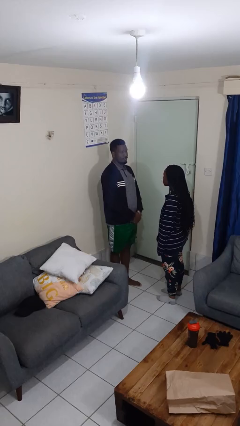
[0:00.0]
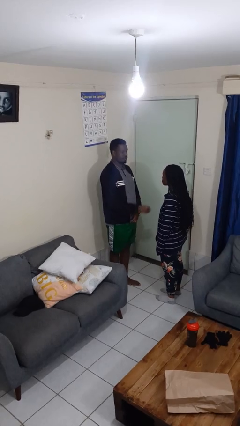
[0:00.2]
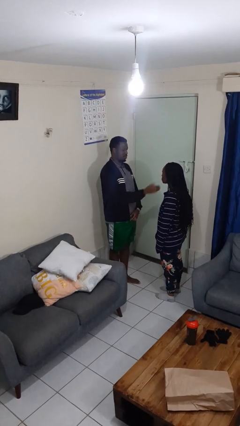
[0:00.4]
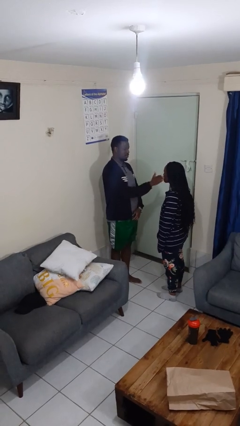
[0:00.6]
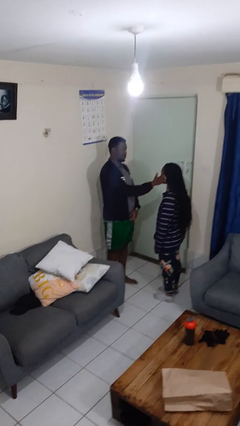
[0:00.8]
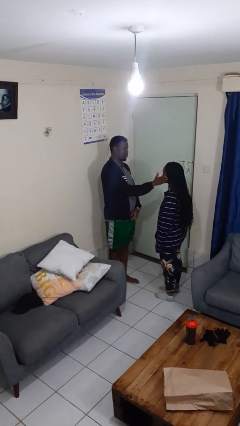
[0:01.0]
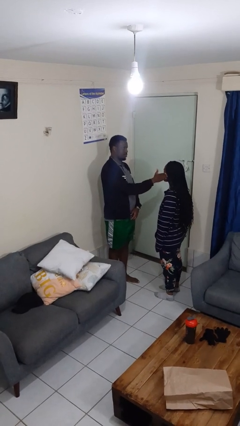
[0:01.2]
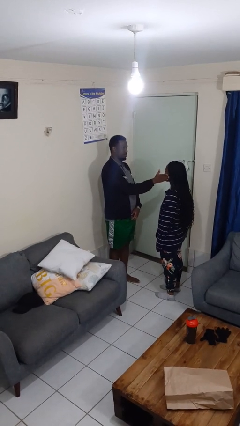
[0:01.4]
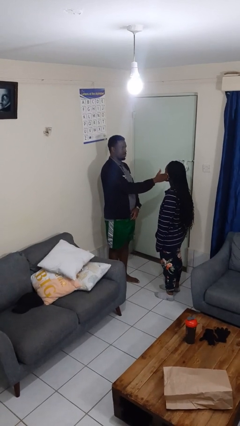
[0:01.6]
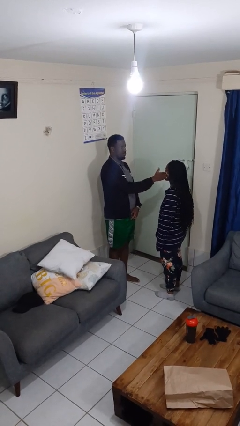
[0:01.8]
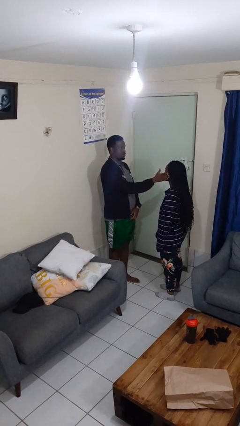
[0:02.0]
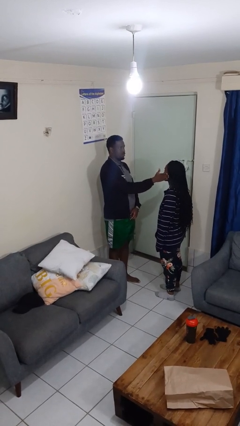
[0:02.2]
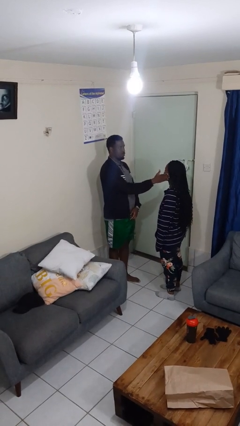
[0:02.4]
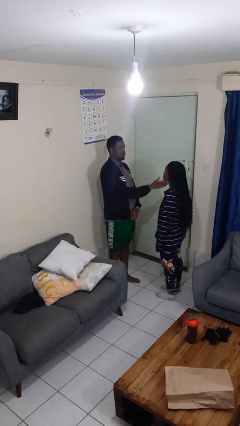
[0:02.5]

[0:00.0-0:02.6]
person touches face of person

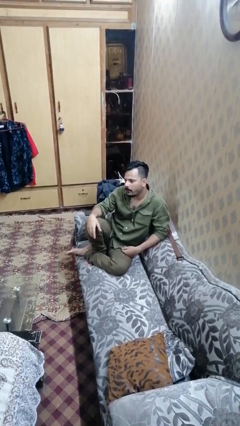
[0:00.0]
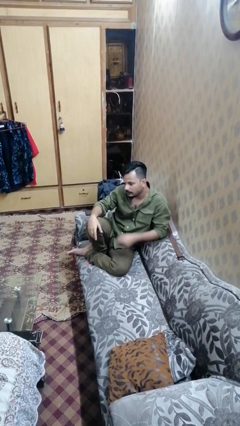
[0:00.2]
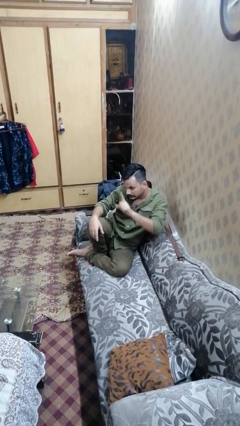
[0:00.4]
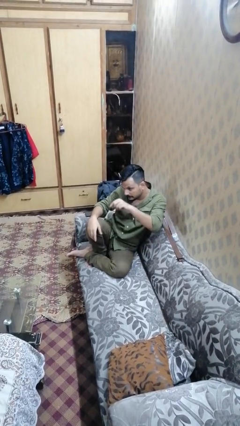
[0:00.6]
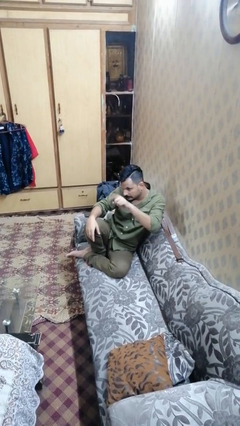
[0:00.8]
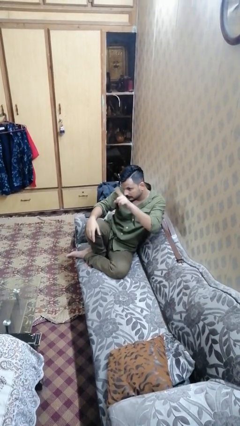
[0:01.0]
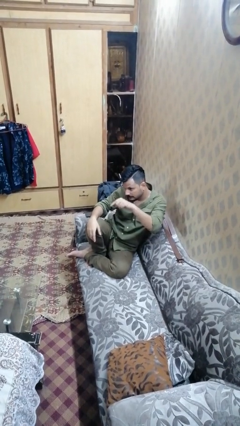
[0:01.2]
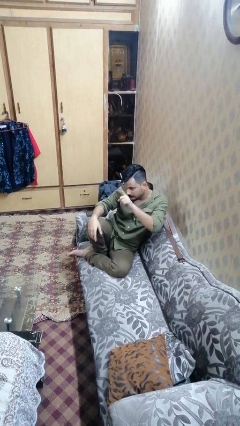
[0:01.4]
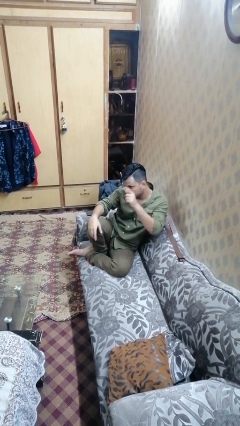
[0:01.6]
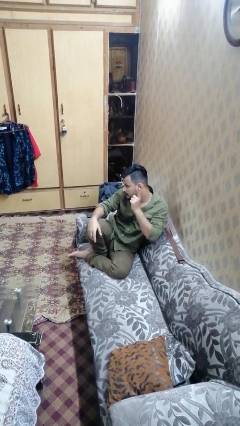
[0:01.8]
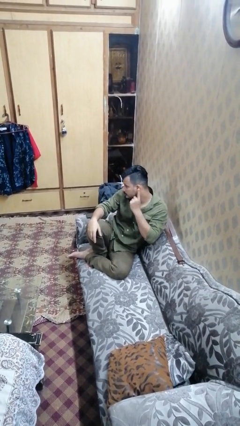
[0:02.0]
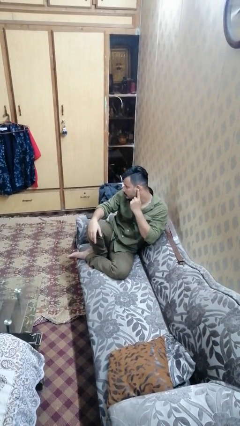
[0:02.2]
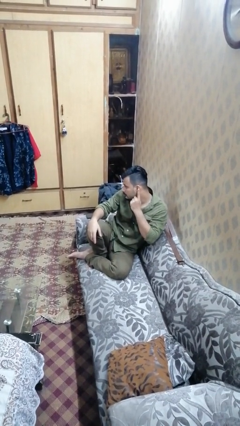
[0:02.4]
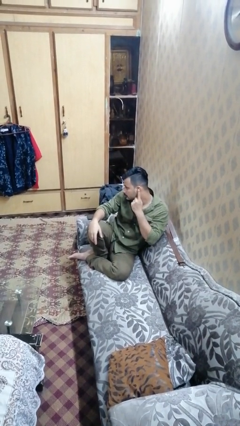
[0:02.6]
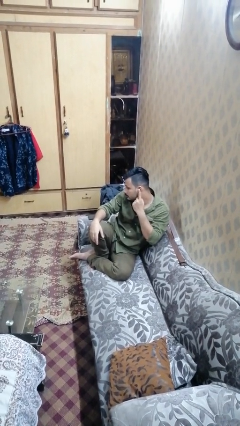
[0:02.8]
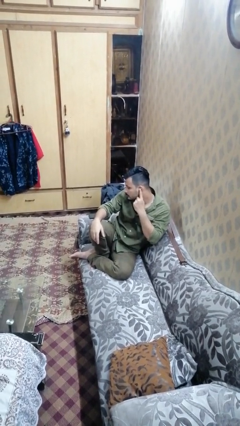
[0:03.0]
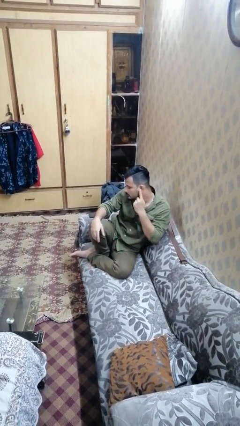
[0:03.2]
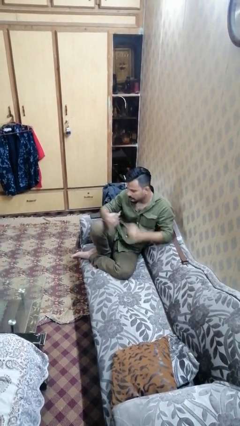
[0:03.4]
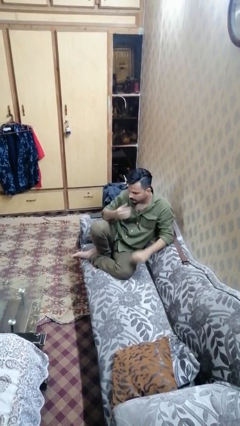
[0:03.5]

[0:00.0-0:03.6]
person gestures listen closely

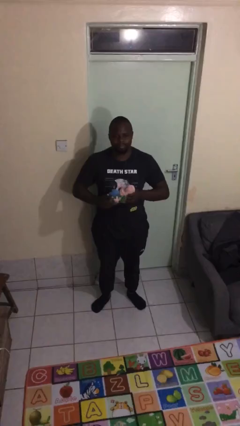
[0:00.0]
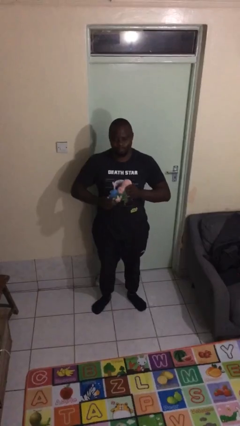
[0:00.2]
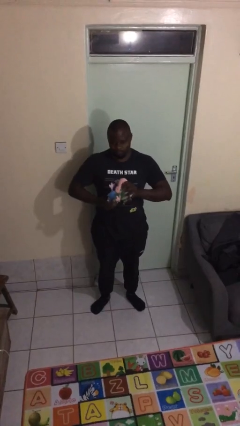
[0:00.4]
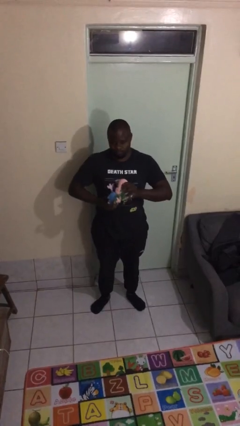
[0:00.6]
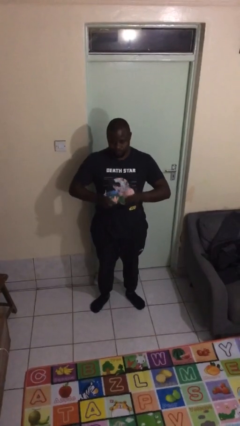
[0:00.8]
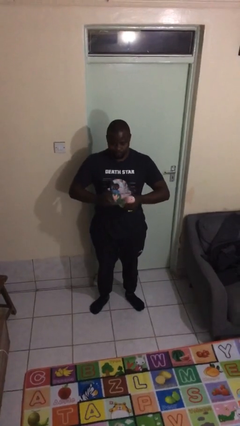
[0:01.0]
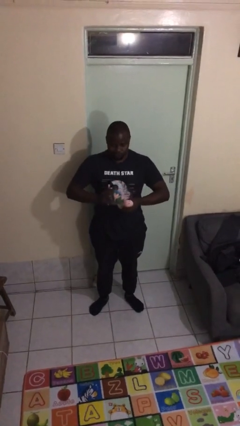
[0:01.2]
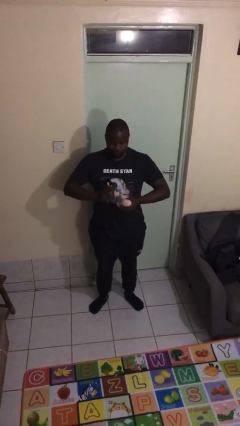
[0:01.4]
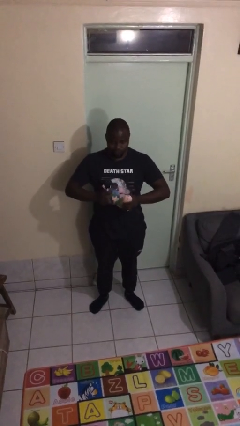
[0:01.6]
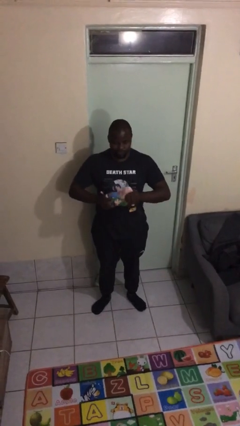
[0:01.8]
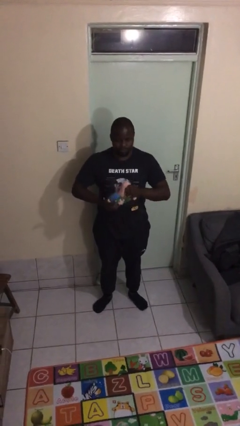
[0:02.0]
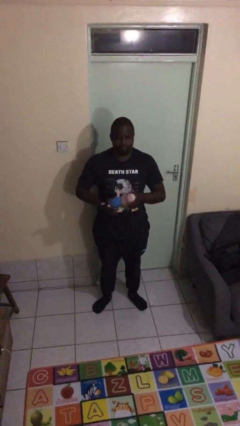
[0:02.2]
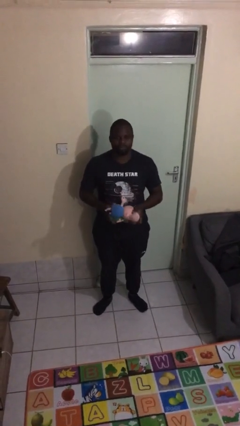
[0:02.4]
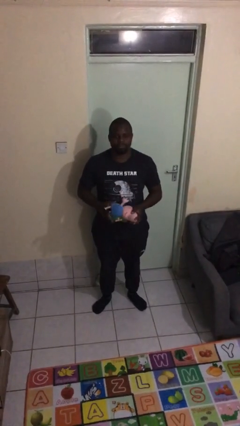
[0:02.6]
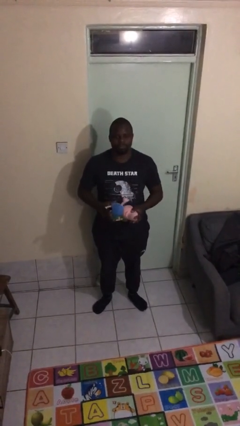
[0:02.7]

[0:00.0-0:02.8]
person squeezes object

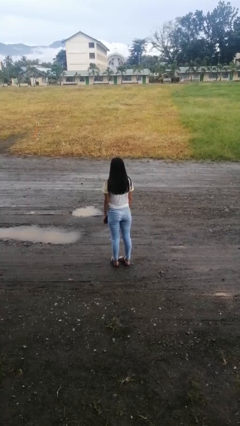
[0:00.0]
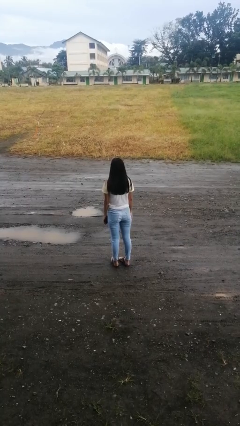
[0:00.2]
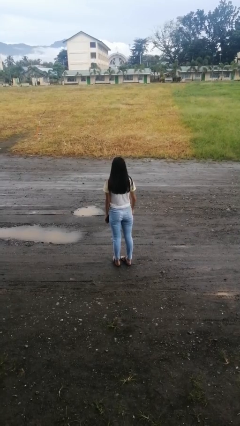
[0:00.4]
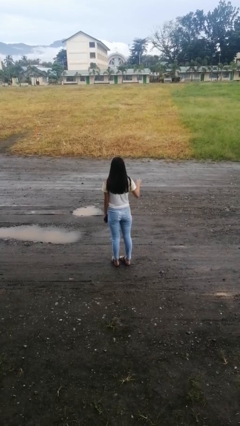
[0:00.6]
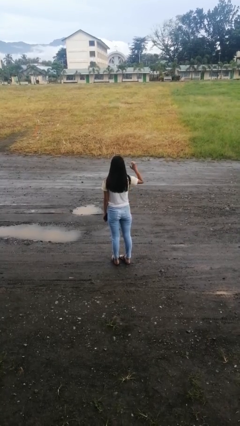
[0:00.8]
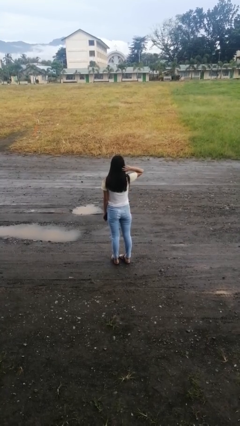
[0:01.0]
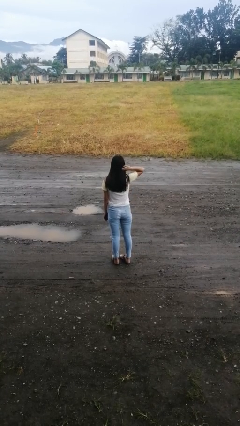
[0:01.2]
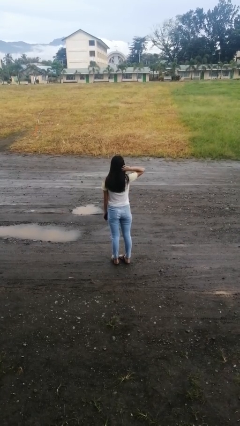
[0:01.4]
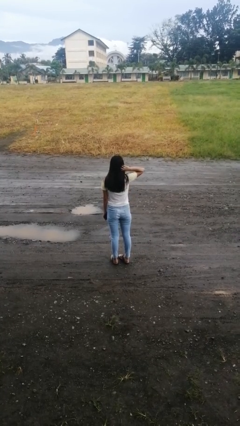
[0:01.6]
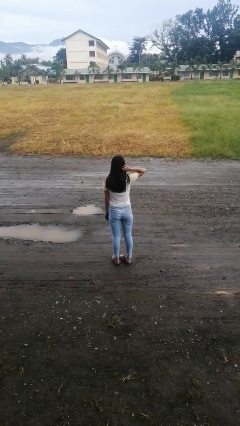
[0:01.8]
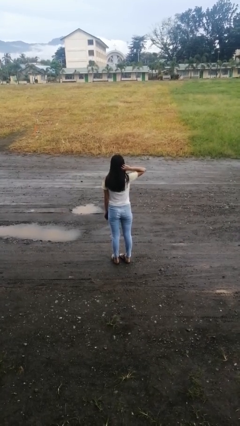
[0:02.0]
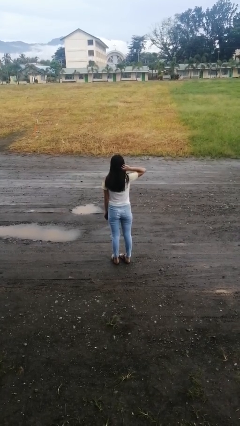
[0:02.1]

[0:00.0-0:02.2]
person scratches face

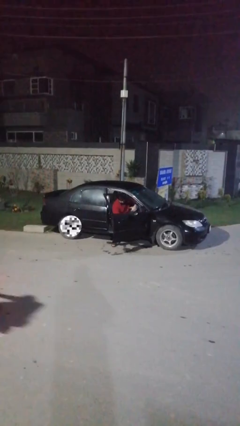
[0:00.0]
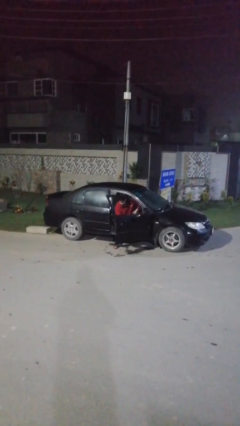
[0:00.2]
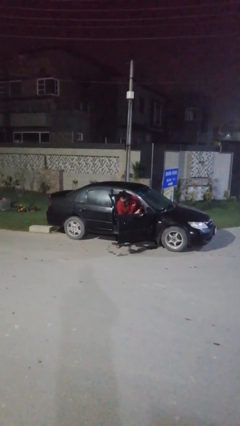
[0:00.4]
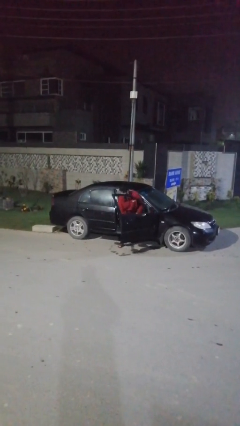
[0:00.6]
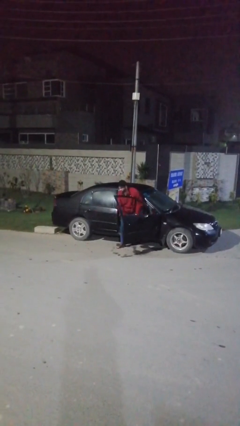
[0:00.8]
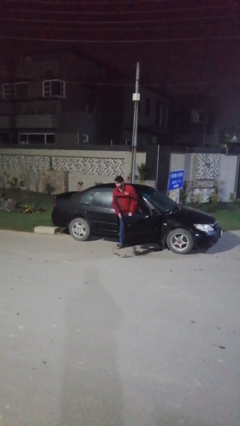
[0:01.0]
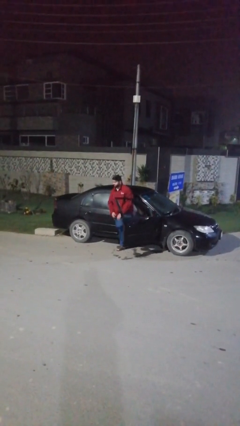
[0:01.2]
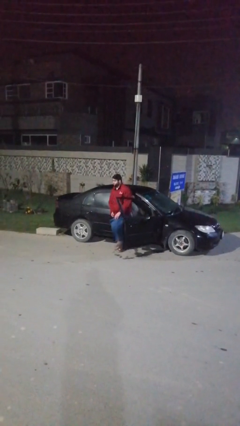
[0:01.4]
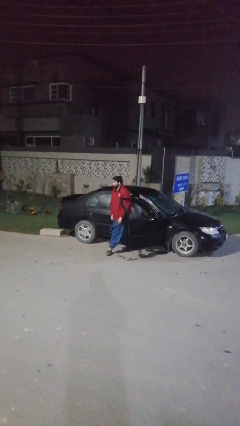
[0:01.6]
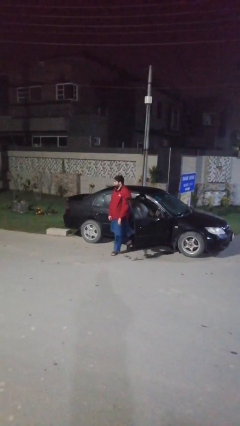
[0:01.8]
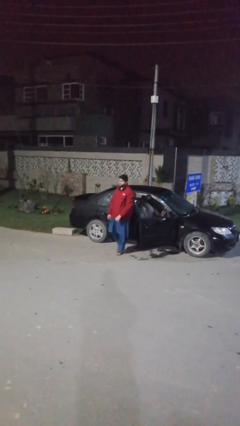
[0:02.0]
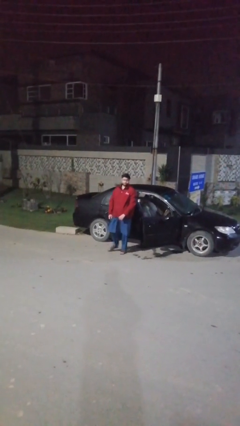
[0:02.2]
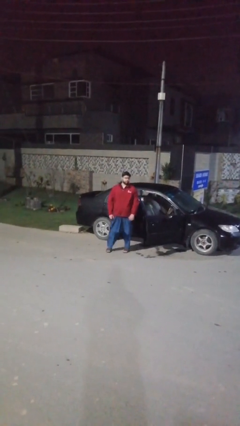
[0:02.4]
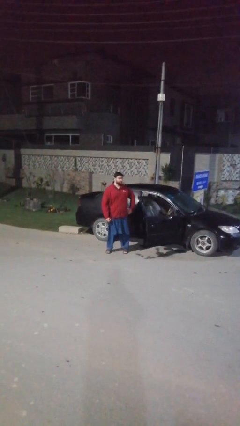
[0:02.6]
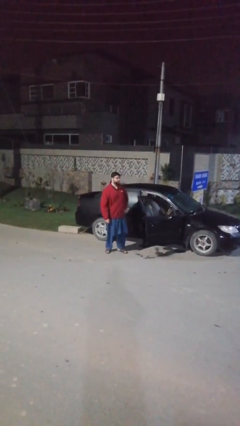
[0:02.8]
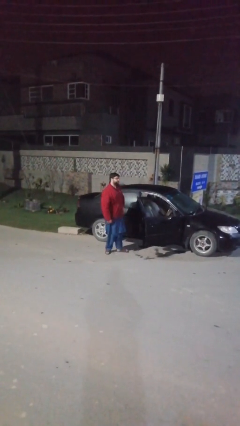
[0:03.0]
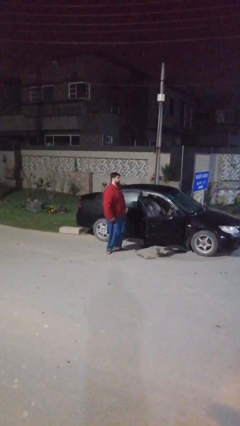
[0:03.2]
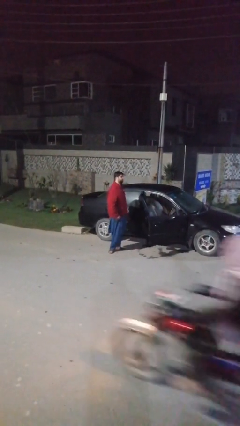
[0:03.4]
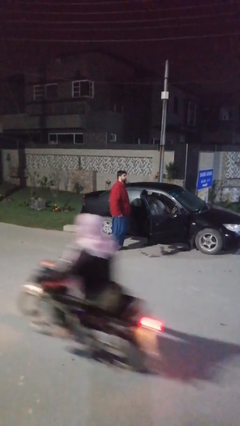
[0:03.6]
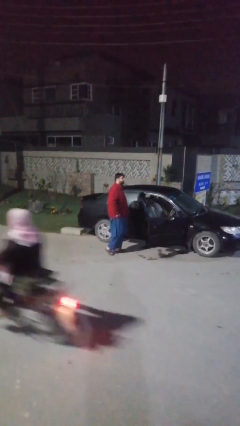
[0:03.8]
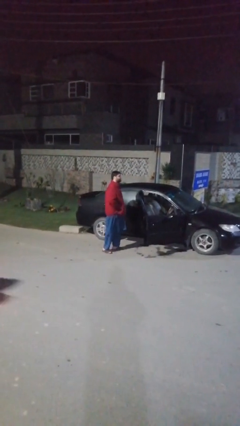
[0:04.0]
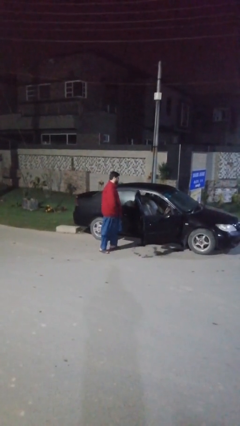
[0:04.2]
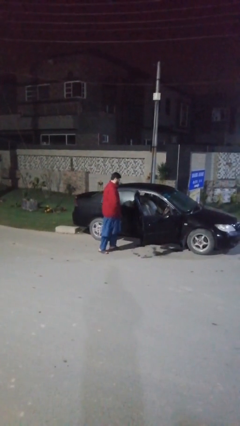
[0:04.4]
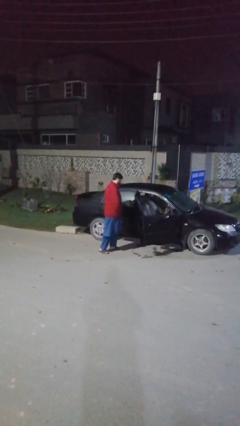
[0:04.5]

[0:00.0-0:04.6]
person exits car

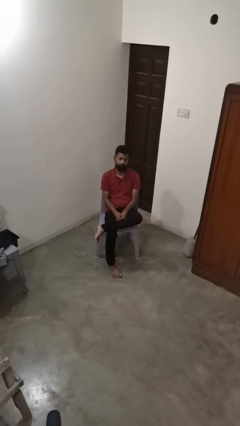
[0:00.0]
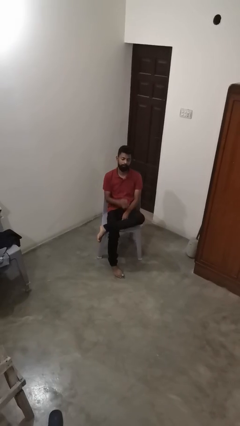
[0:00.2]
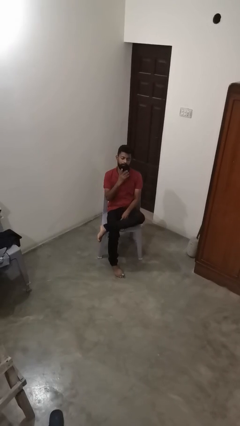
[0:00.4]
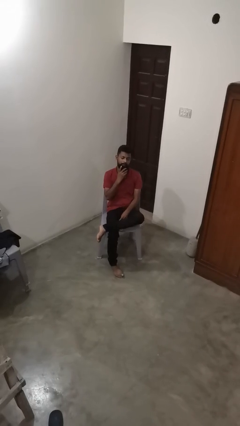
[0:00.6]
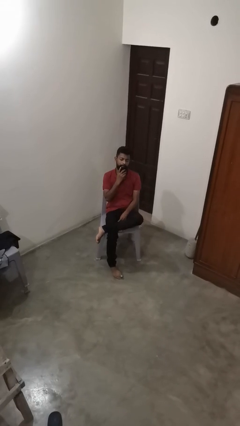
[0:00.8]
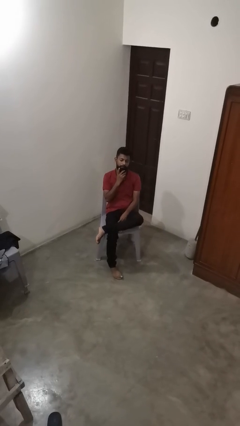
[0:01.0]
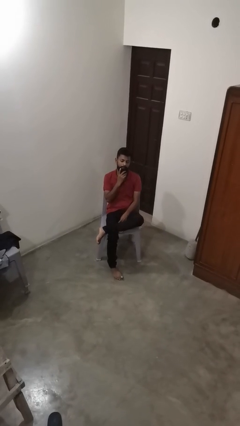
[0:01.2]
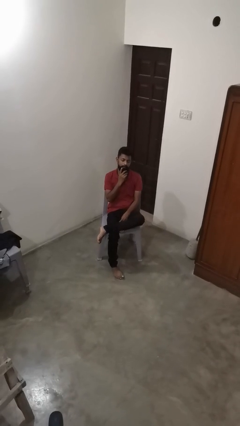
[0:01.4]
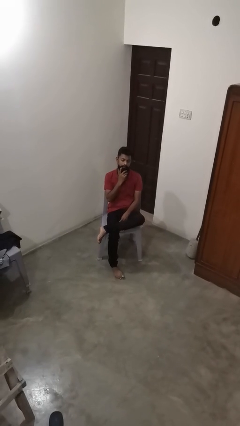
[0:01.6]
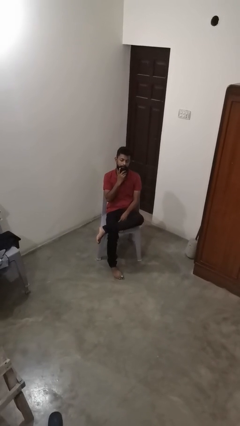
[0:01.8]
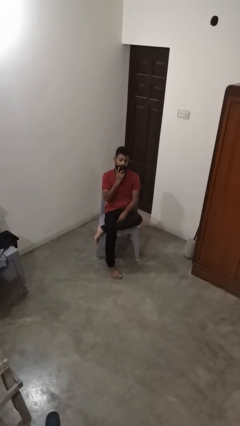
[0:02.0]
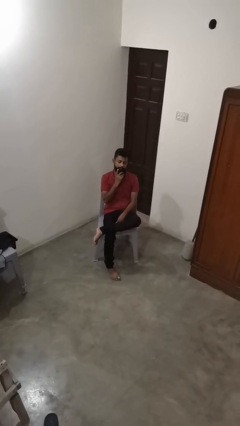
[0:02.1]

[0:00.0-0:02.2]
person strokes chin
